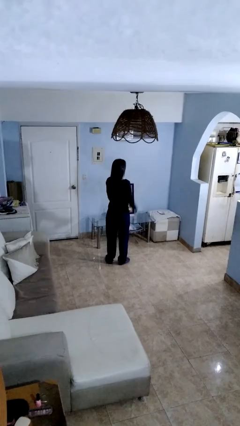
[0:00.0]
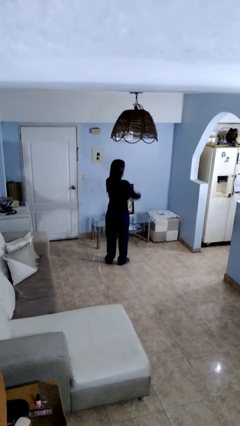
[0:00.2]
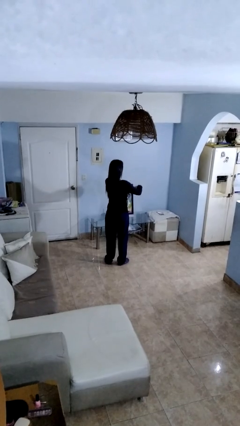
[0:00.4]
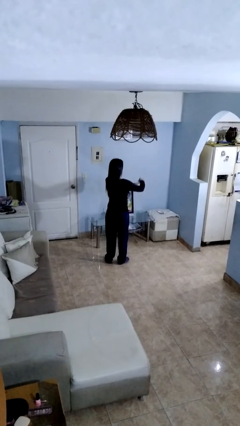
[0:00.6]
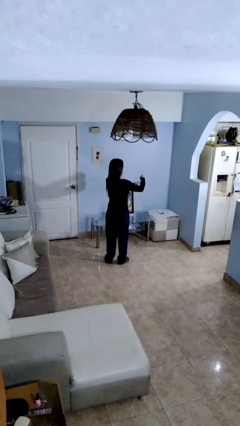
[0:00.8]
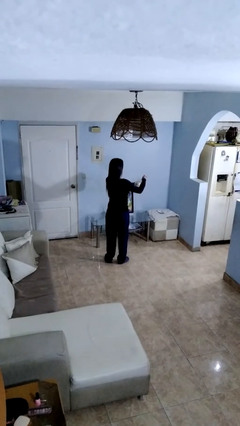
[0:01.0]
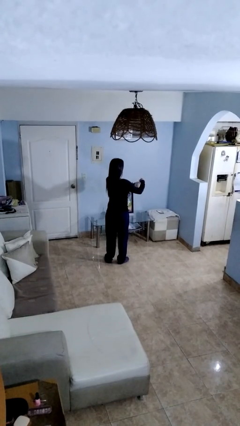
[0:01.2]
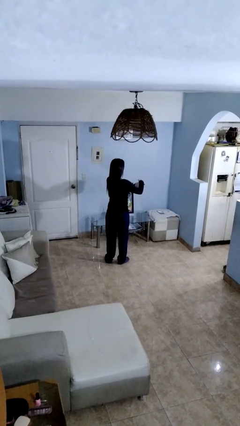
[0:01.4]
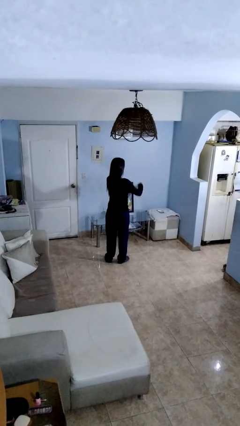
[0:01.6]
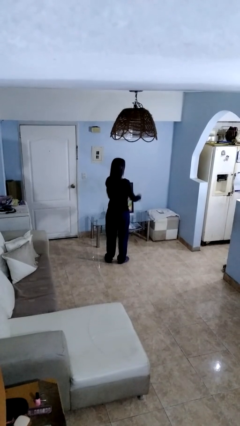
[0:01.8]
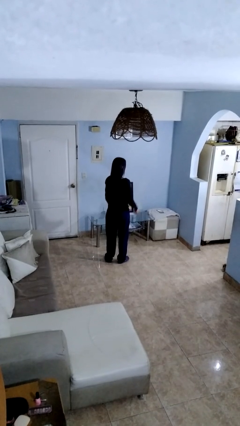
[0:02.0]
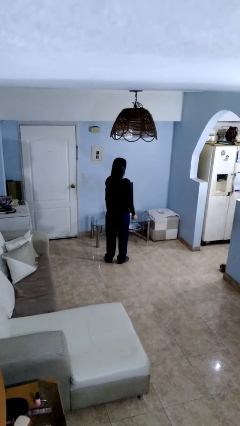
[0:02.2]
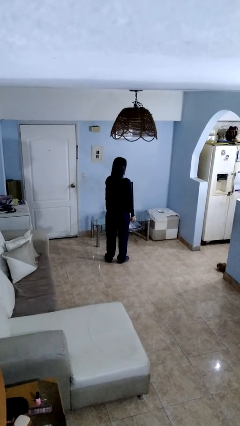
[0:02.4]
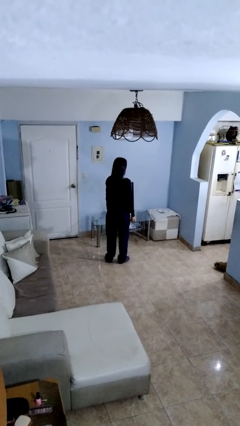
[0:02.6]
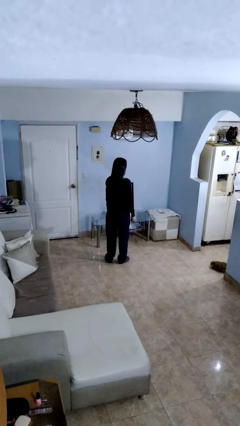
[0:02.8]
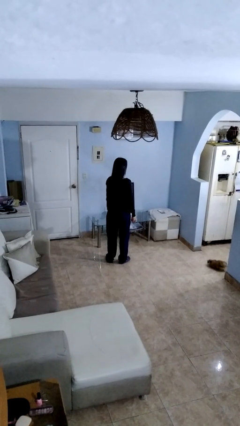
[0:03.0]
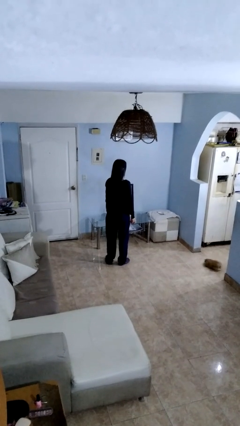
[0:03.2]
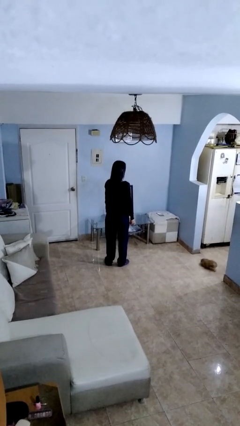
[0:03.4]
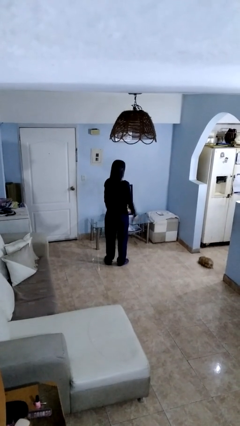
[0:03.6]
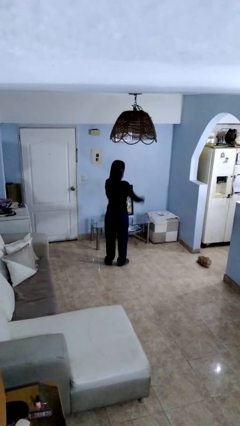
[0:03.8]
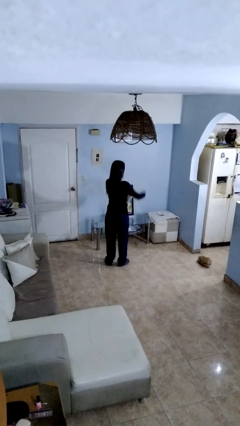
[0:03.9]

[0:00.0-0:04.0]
person opens jar

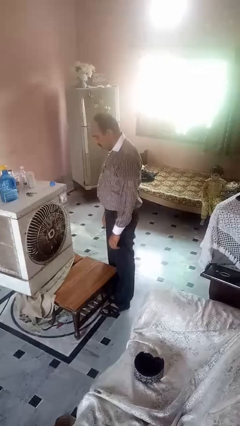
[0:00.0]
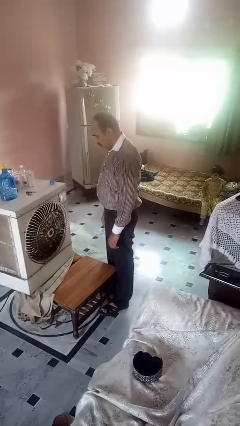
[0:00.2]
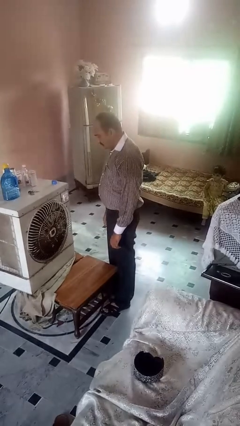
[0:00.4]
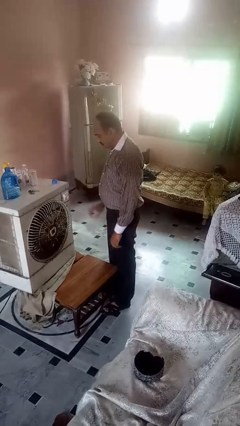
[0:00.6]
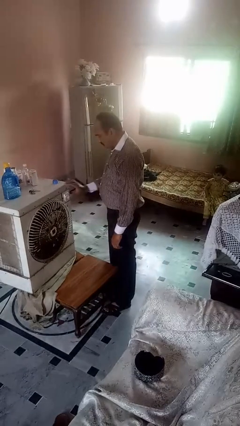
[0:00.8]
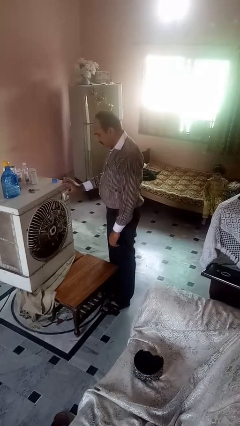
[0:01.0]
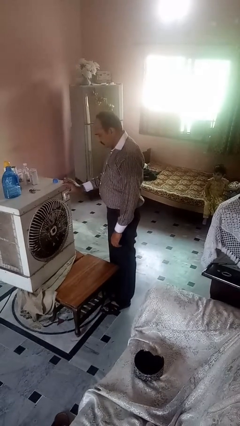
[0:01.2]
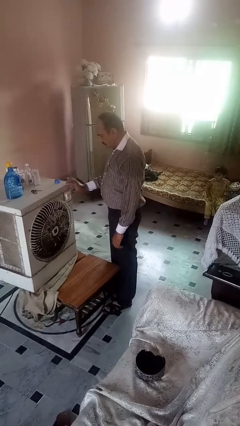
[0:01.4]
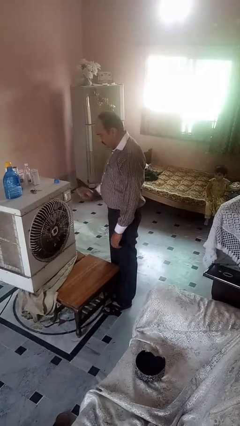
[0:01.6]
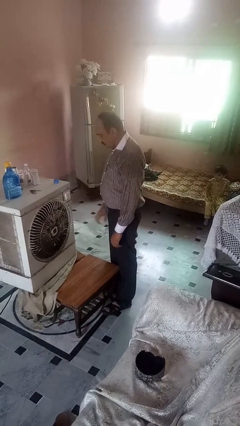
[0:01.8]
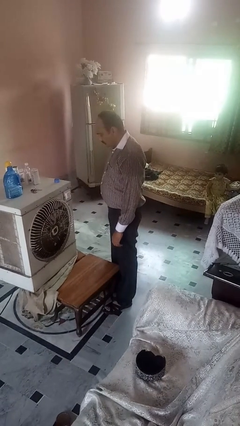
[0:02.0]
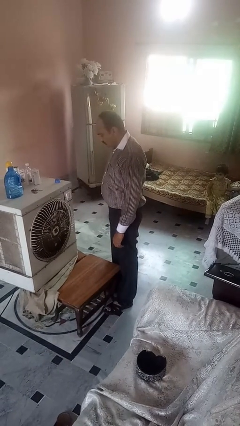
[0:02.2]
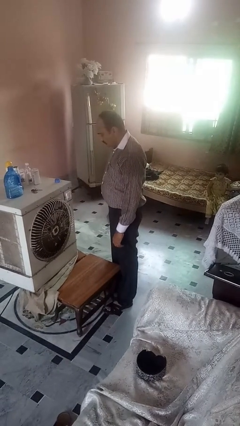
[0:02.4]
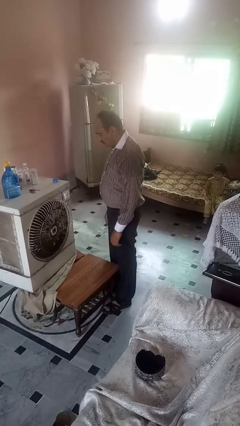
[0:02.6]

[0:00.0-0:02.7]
person turns off fan

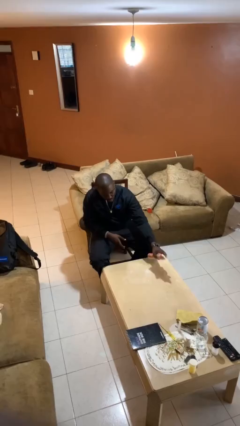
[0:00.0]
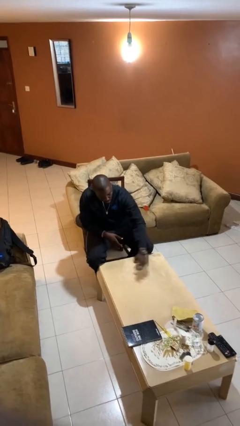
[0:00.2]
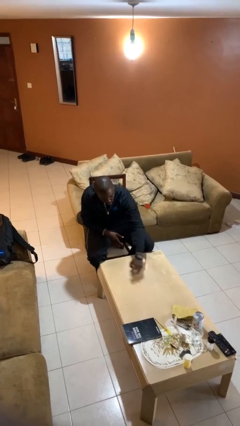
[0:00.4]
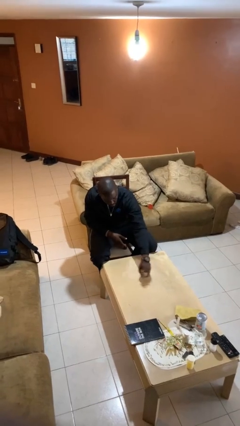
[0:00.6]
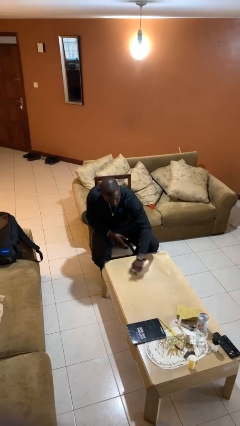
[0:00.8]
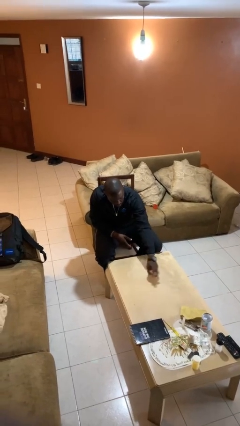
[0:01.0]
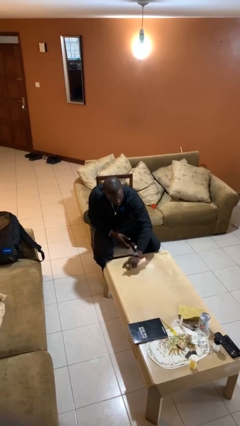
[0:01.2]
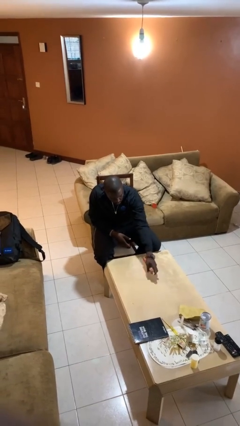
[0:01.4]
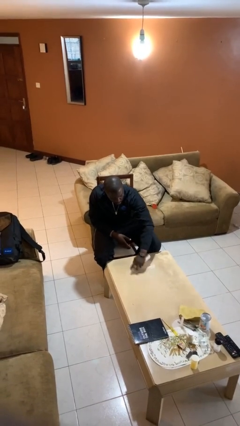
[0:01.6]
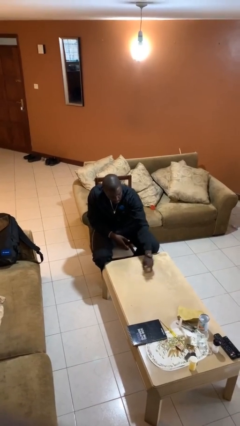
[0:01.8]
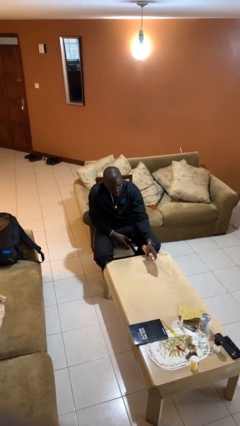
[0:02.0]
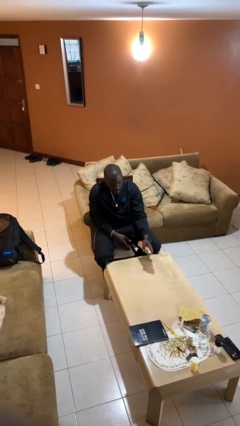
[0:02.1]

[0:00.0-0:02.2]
person sprays from bottle

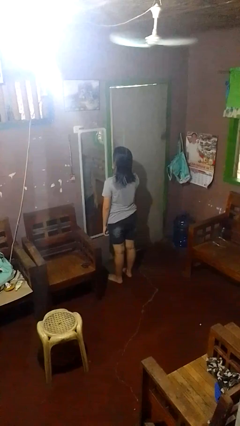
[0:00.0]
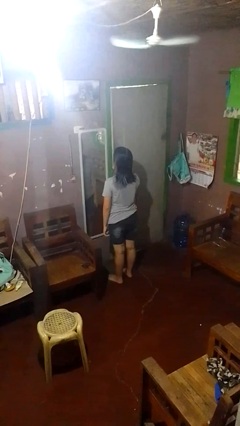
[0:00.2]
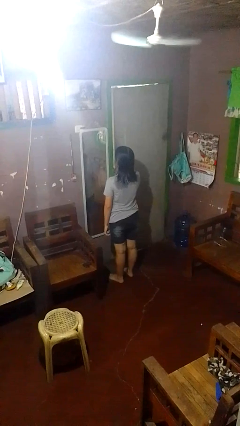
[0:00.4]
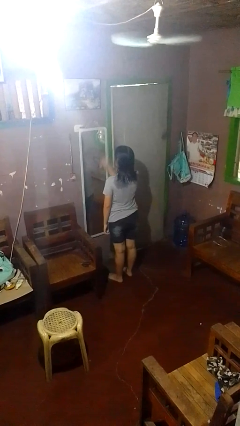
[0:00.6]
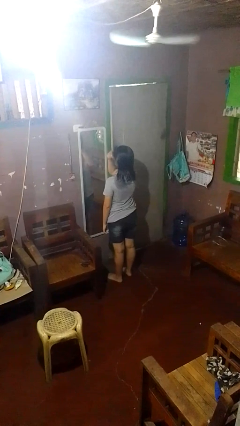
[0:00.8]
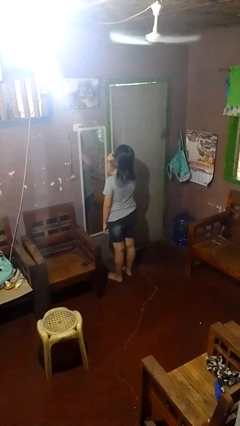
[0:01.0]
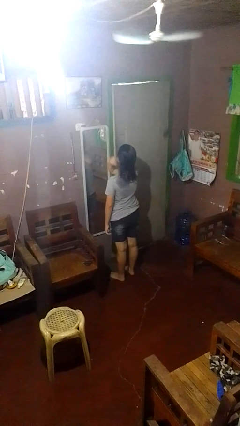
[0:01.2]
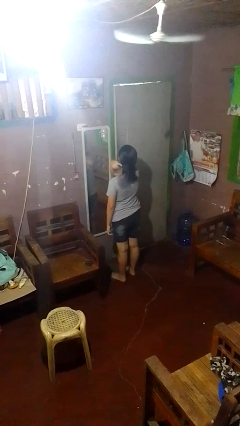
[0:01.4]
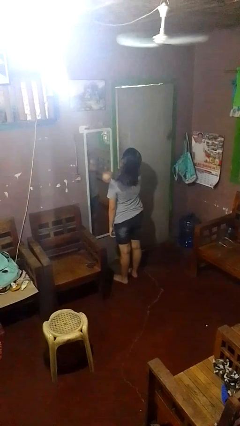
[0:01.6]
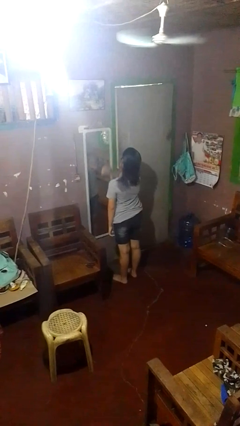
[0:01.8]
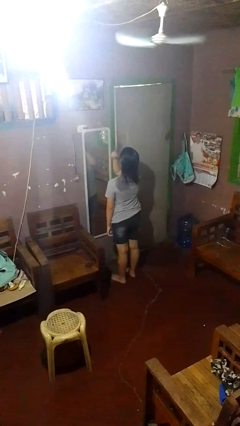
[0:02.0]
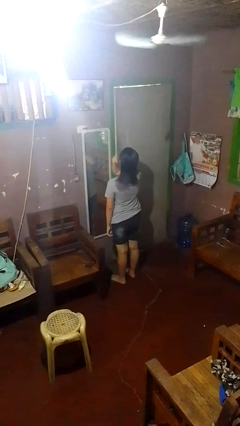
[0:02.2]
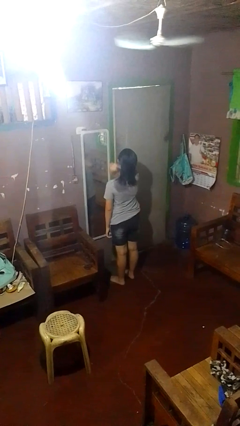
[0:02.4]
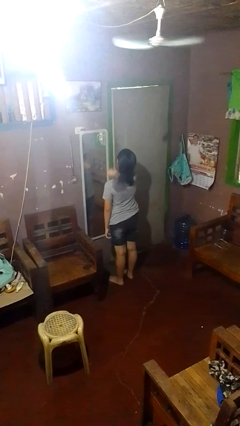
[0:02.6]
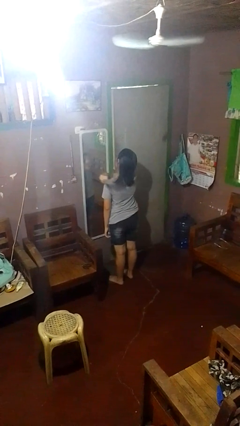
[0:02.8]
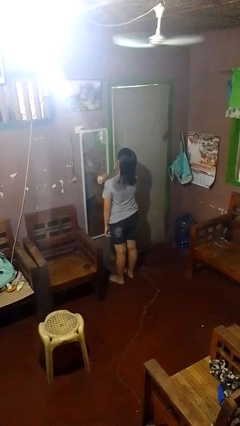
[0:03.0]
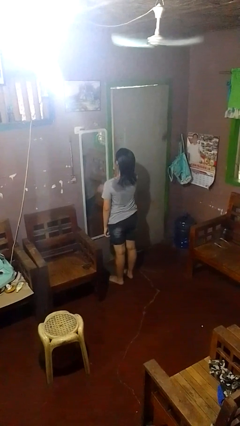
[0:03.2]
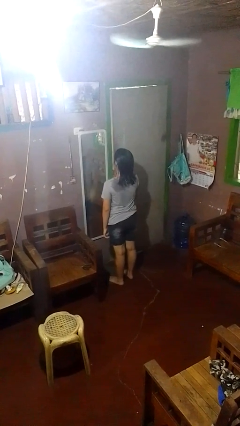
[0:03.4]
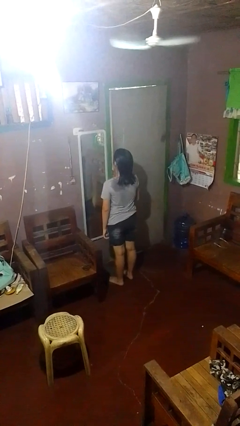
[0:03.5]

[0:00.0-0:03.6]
person brushes hair

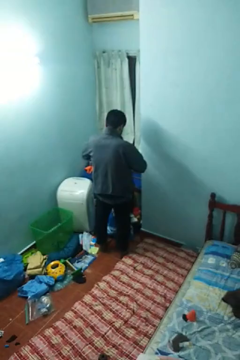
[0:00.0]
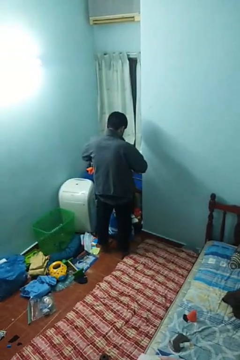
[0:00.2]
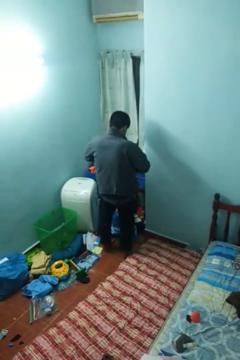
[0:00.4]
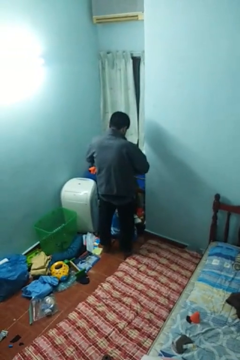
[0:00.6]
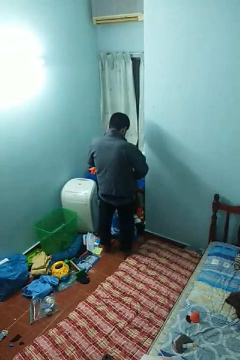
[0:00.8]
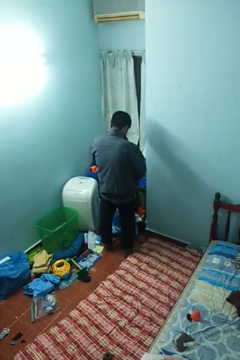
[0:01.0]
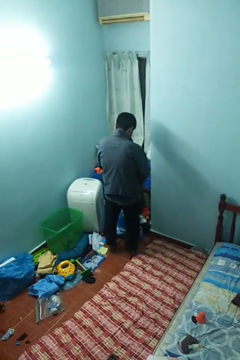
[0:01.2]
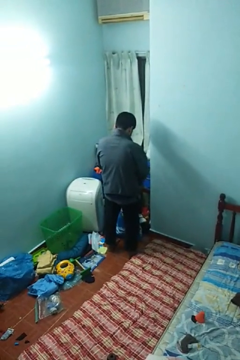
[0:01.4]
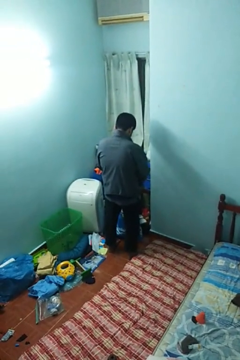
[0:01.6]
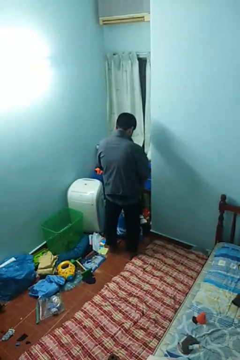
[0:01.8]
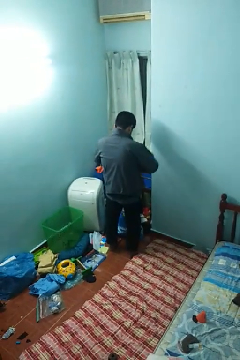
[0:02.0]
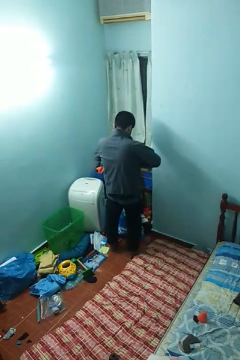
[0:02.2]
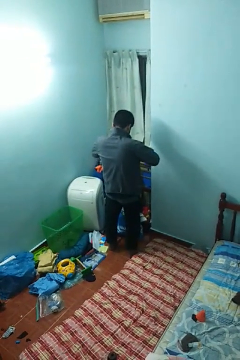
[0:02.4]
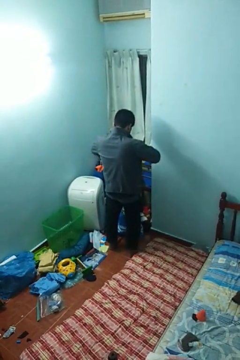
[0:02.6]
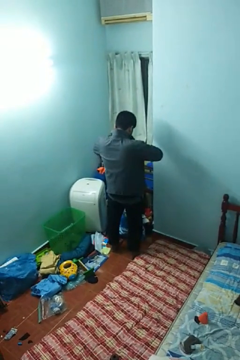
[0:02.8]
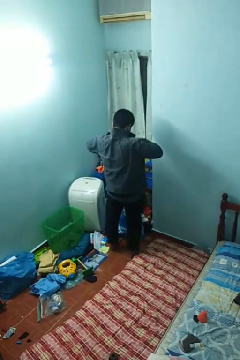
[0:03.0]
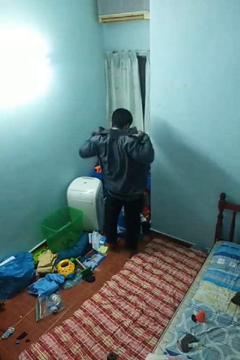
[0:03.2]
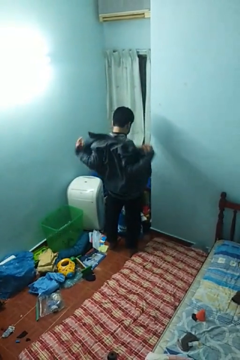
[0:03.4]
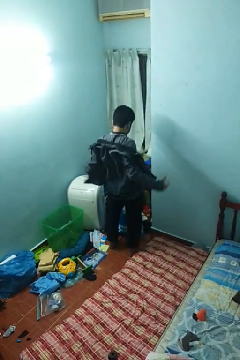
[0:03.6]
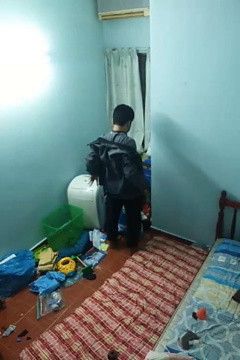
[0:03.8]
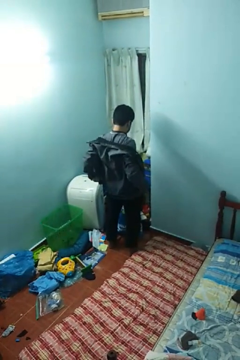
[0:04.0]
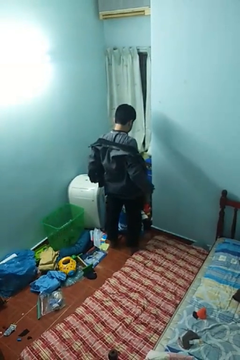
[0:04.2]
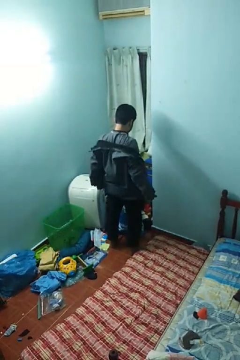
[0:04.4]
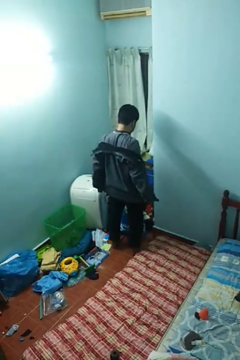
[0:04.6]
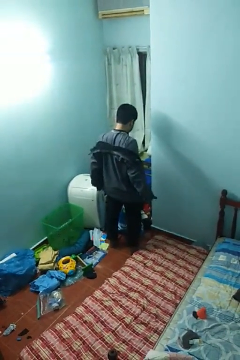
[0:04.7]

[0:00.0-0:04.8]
person unbuttons shirt

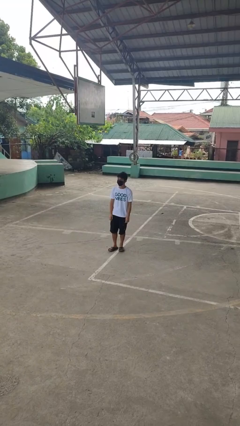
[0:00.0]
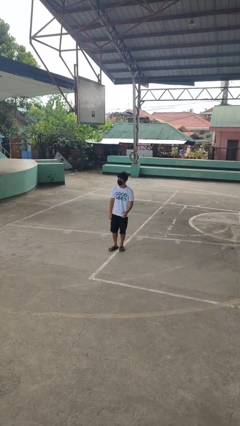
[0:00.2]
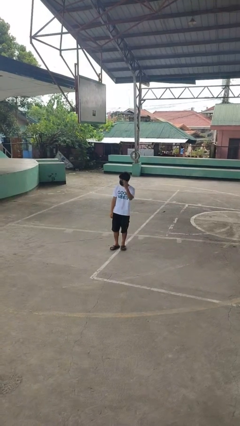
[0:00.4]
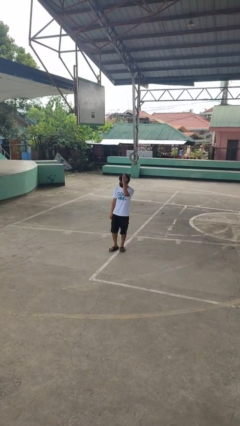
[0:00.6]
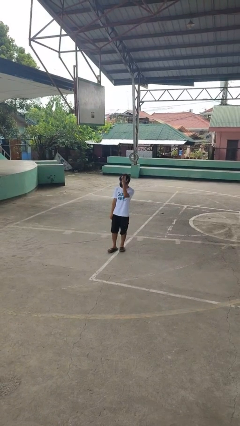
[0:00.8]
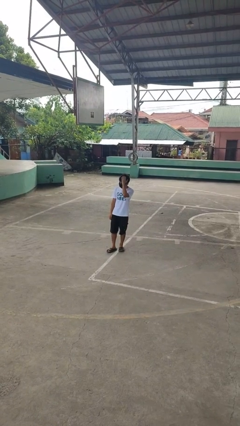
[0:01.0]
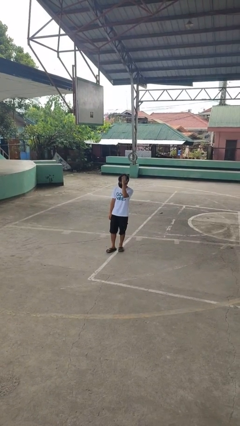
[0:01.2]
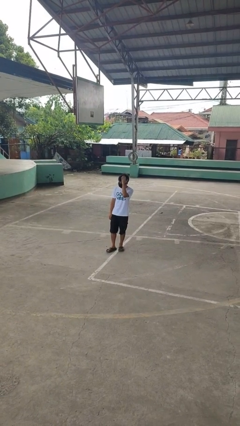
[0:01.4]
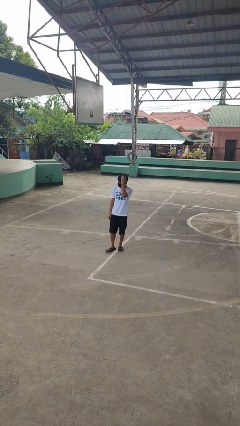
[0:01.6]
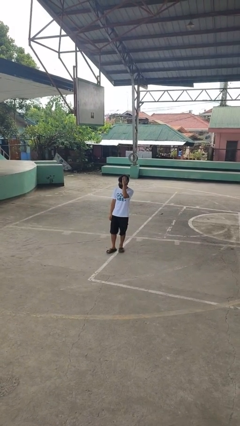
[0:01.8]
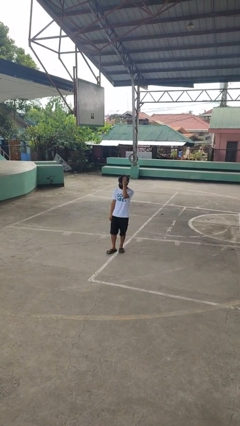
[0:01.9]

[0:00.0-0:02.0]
person pats head
